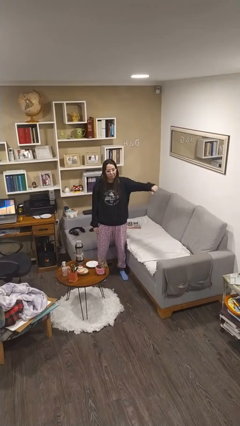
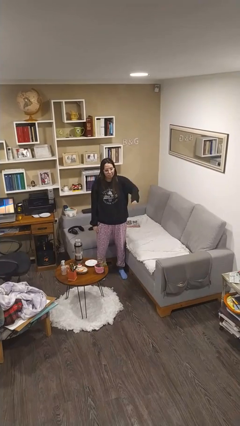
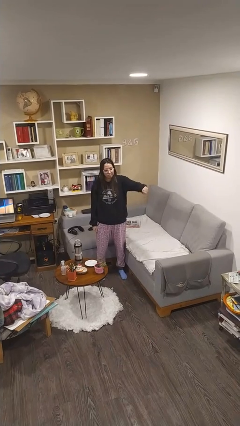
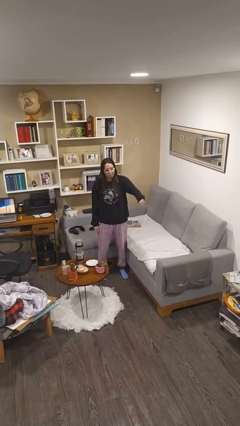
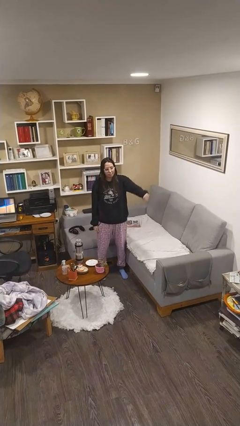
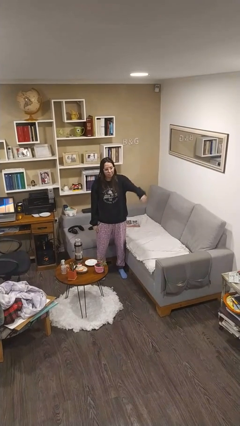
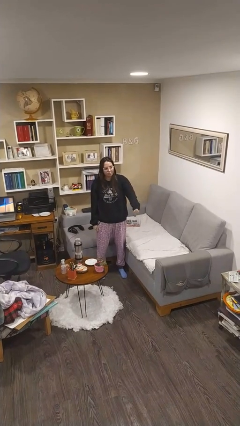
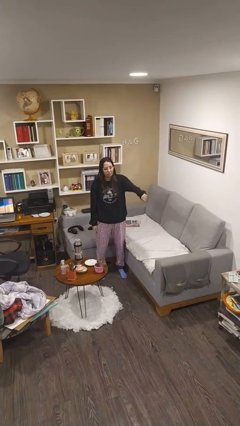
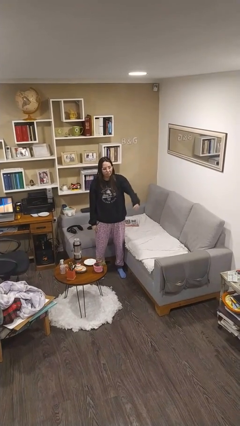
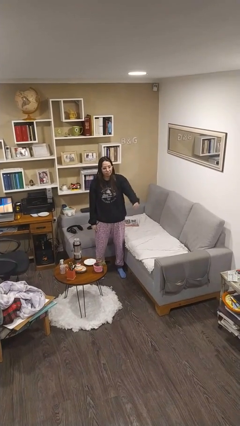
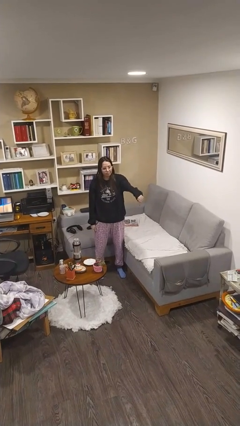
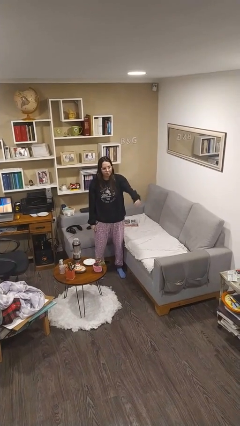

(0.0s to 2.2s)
person gestures thumbs down

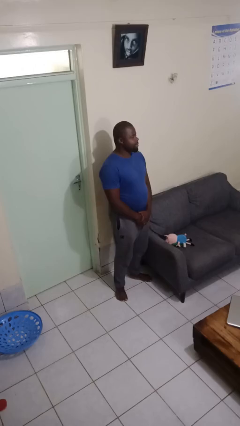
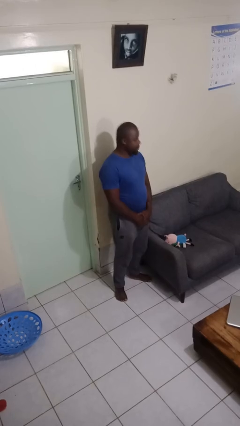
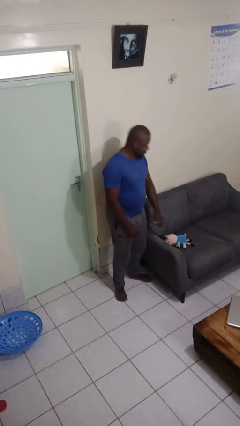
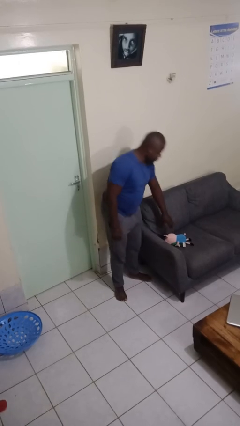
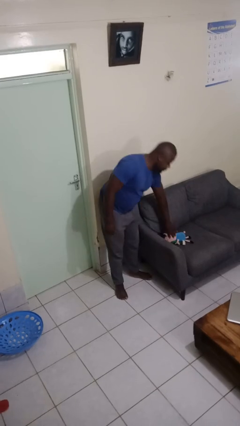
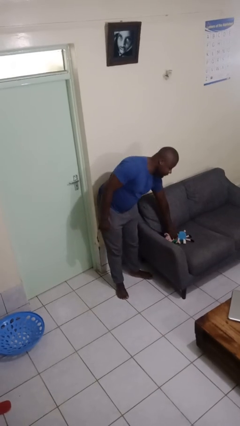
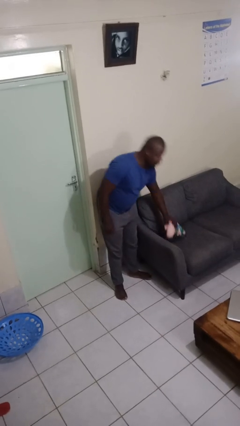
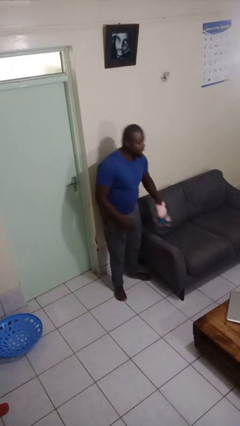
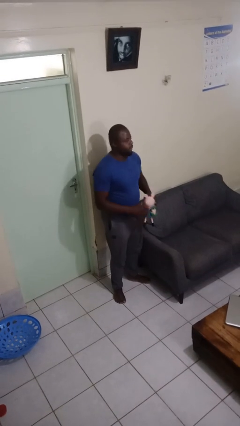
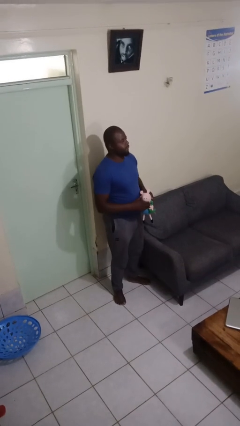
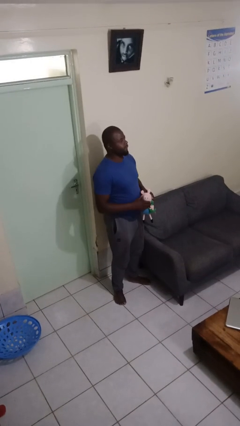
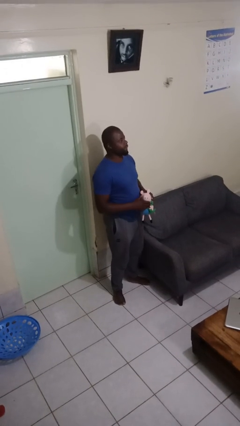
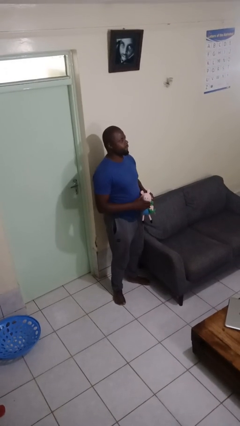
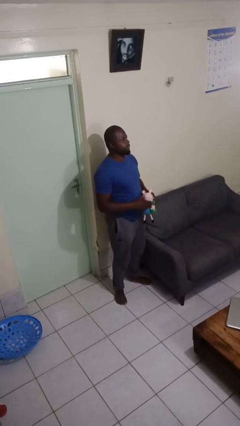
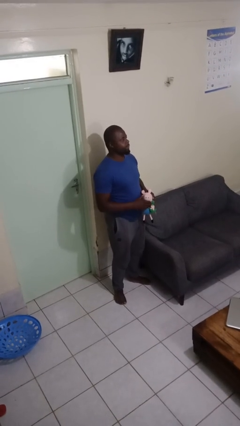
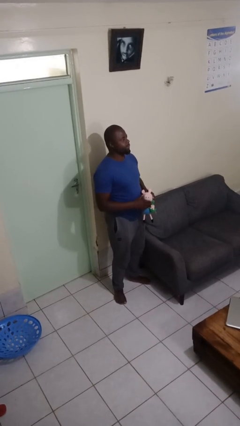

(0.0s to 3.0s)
person picks up object from couch

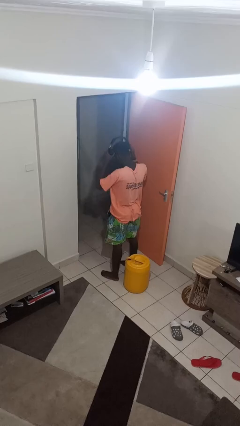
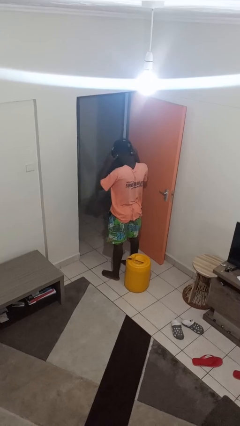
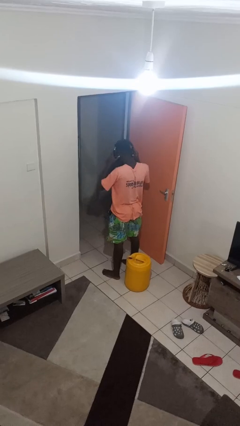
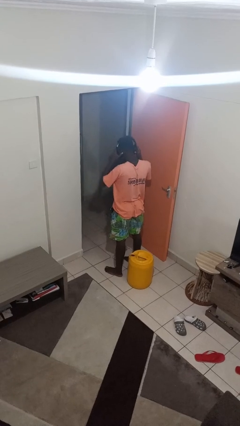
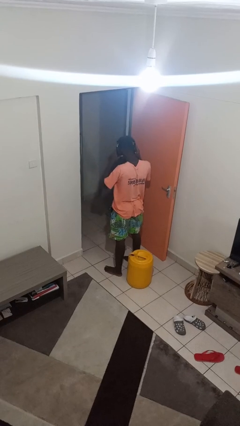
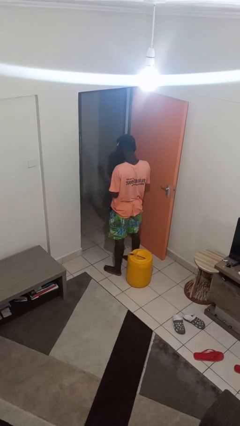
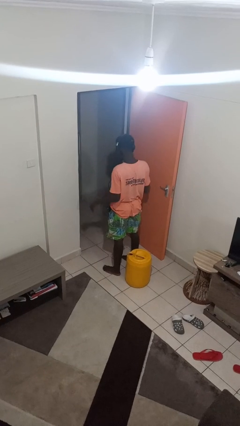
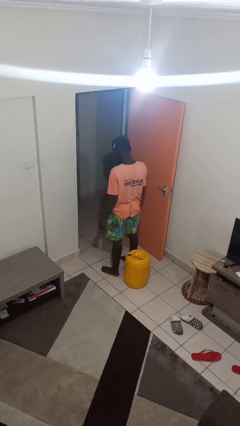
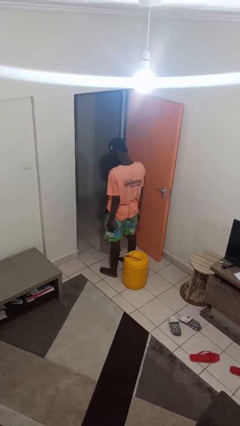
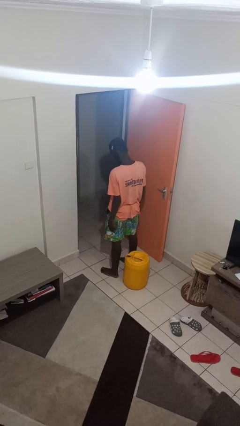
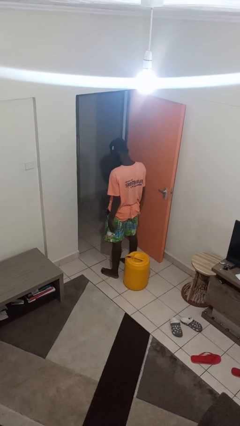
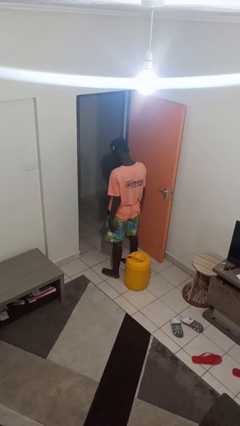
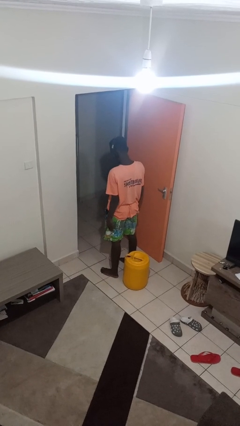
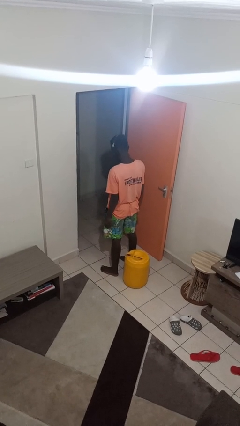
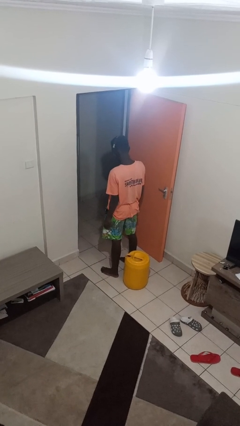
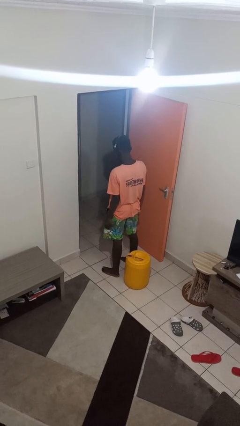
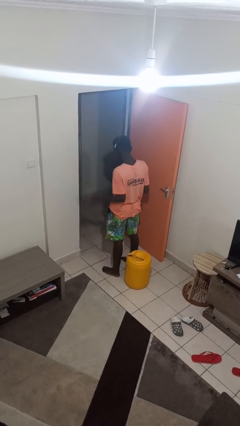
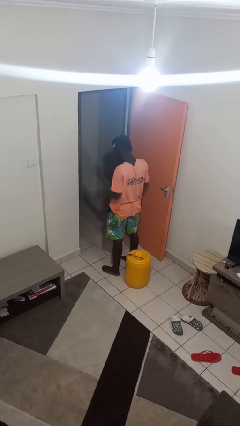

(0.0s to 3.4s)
person puts on headphones

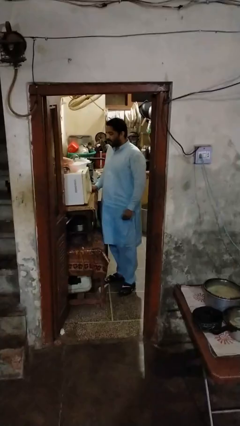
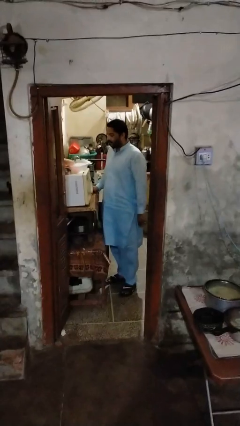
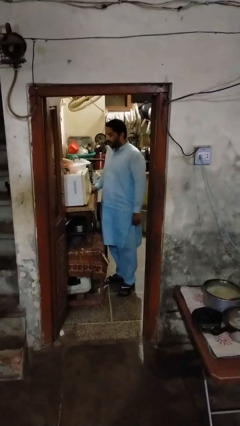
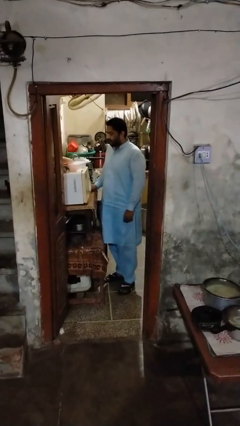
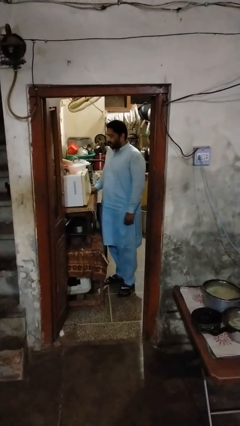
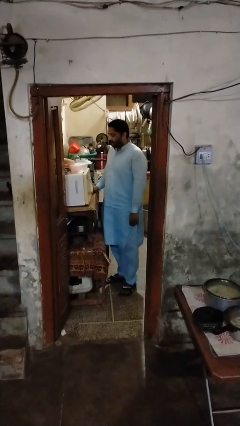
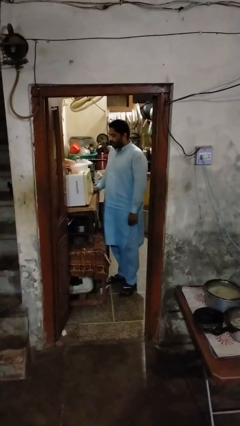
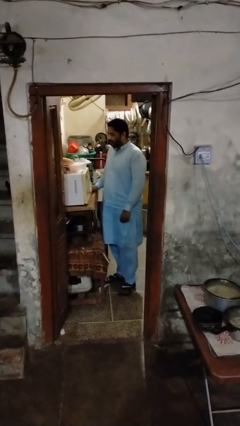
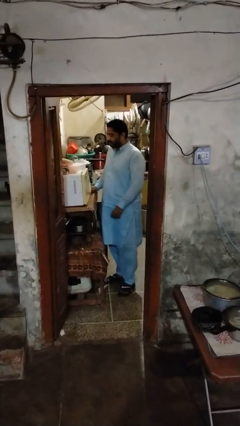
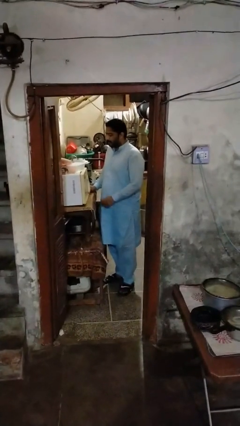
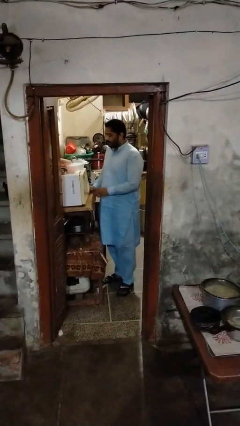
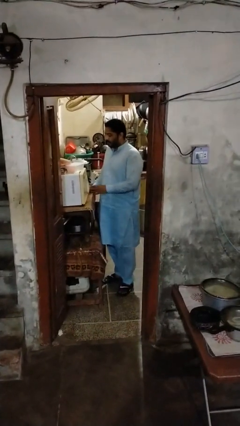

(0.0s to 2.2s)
person stands up from floor

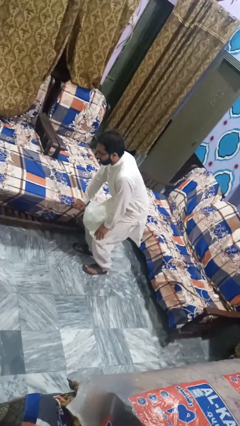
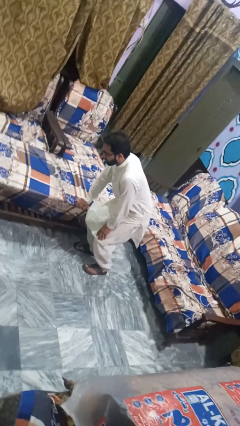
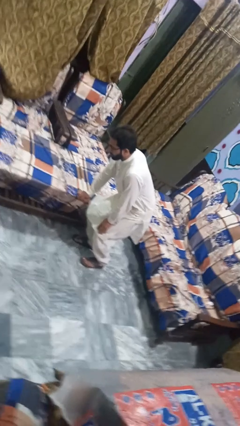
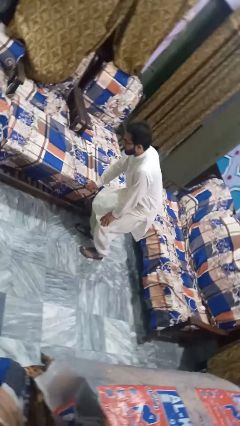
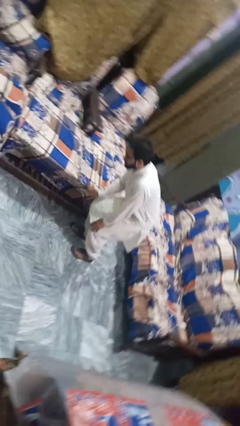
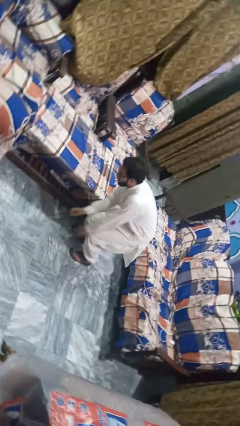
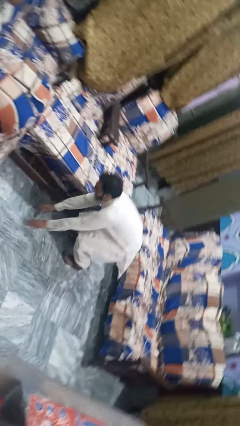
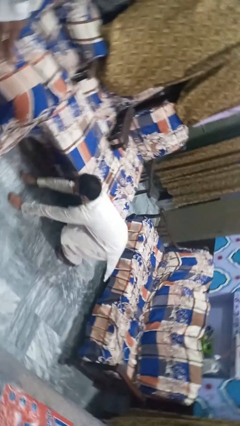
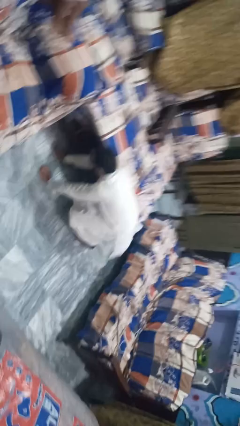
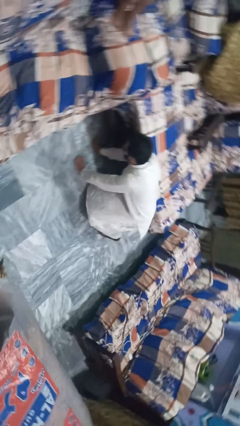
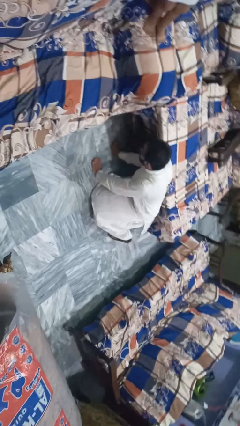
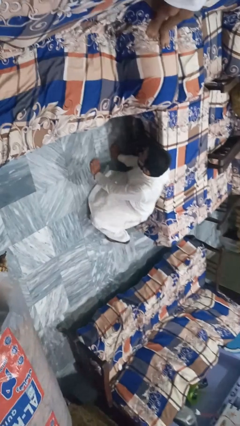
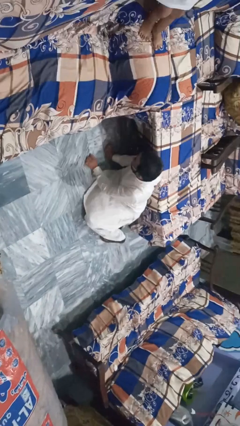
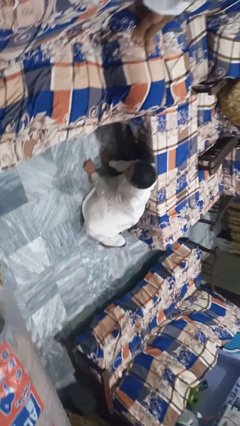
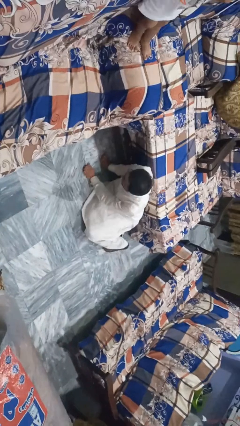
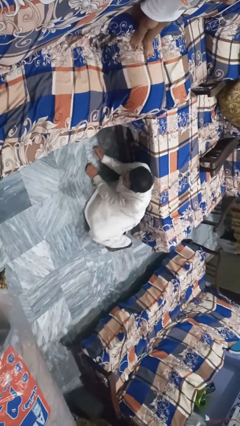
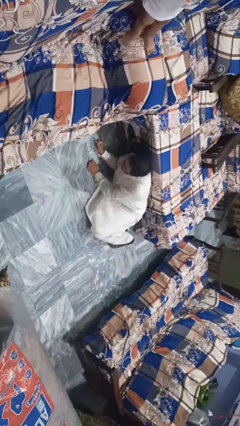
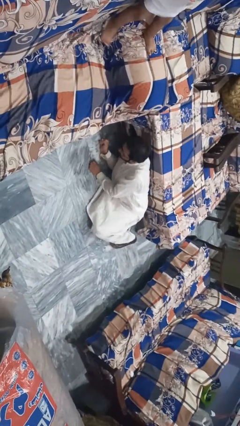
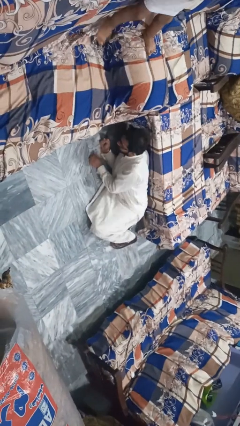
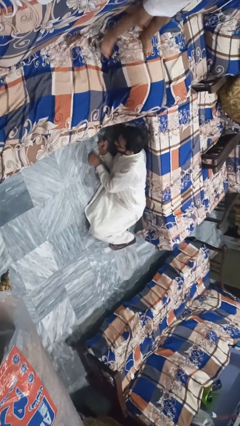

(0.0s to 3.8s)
person lies down on floor

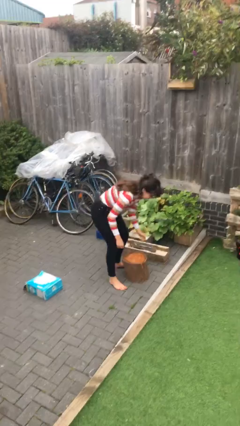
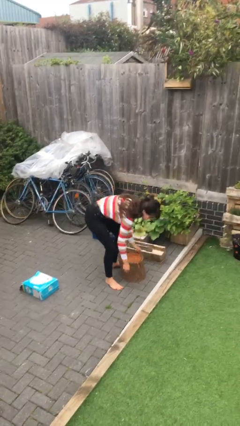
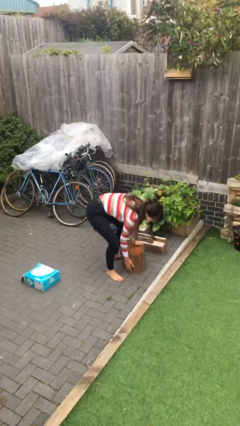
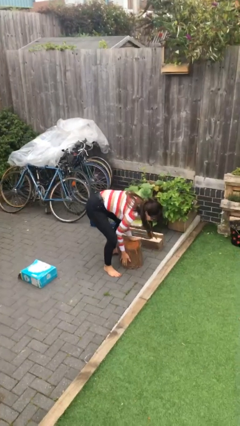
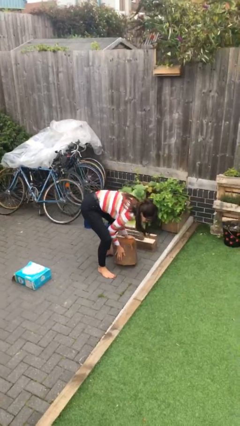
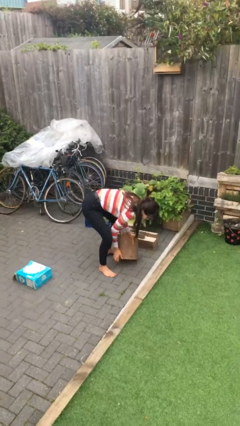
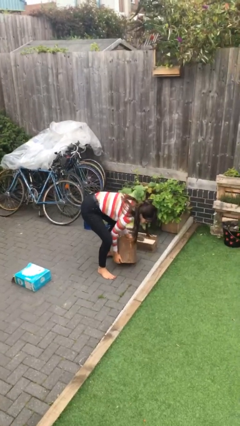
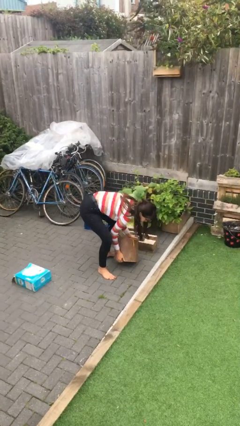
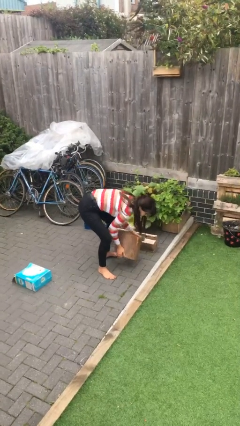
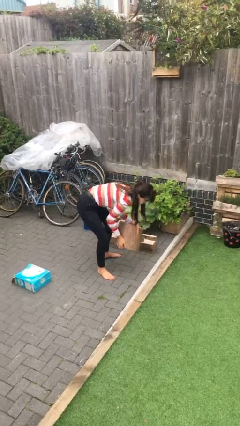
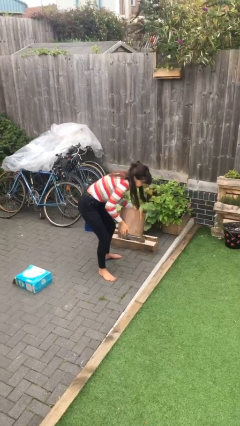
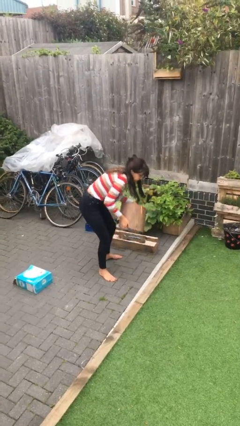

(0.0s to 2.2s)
person picks up object from floor

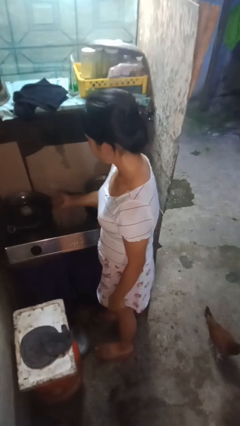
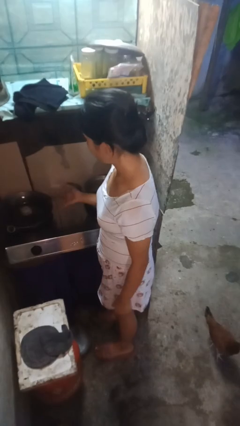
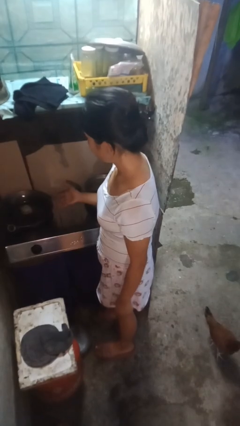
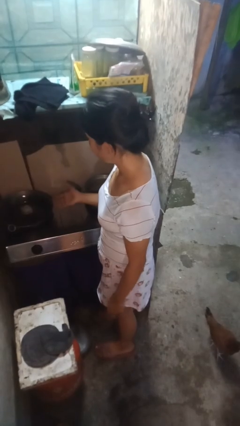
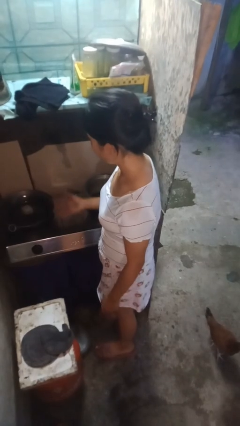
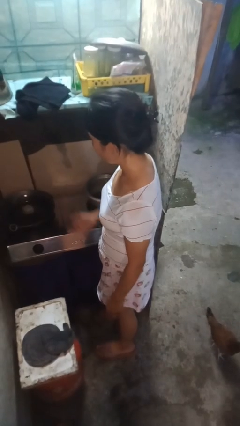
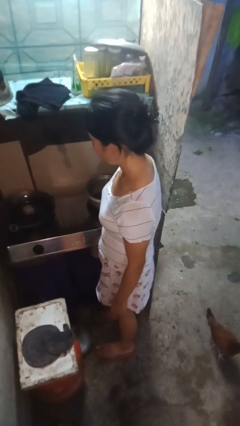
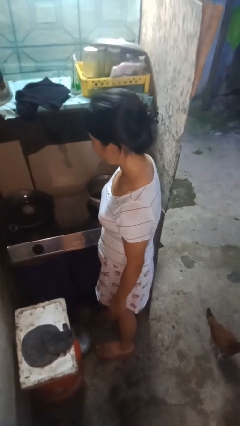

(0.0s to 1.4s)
person burns hand
